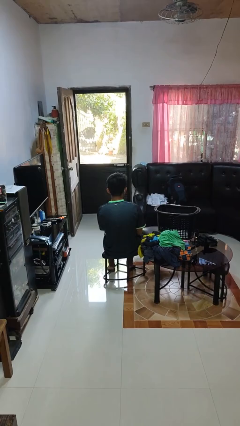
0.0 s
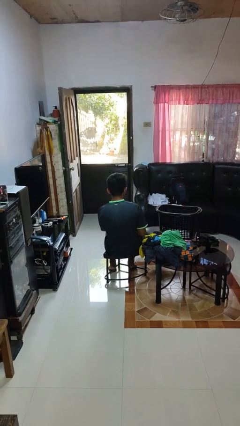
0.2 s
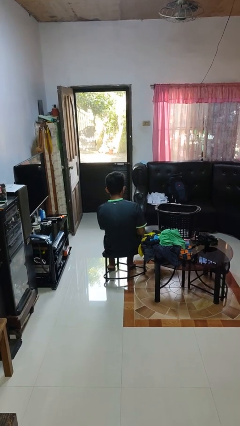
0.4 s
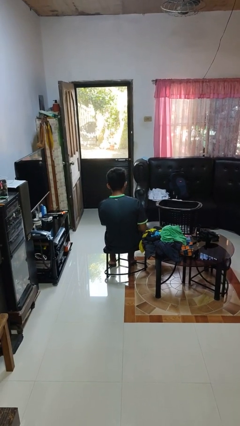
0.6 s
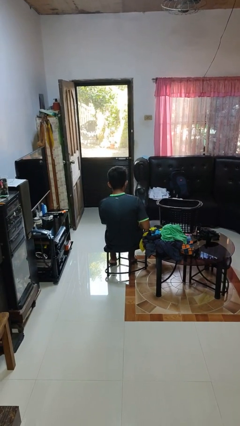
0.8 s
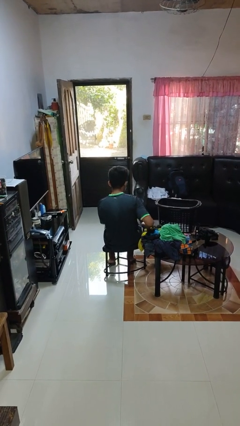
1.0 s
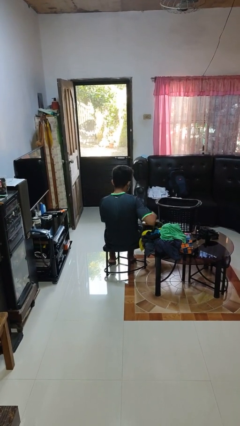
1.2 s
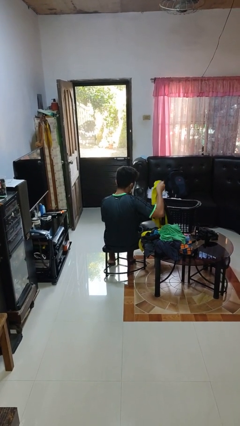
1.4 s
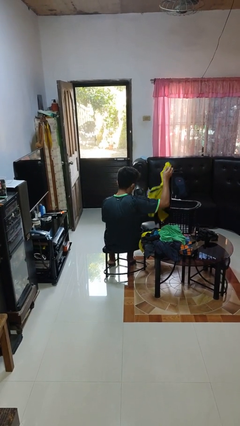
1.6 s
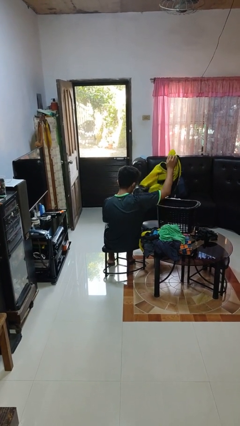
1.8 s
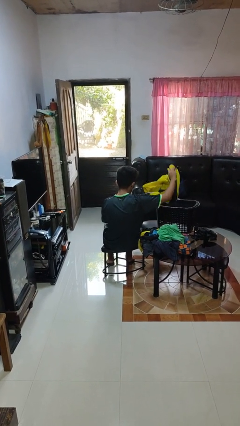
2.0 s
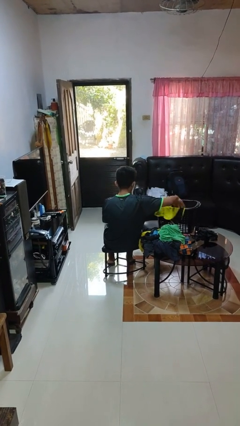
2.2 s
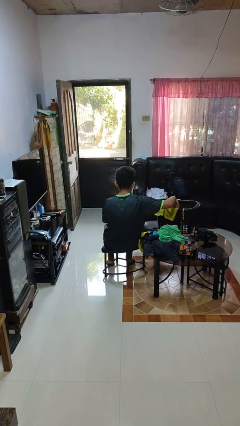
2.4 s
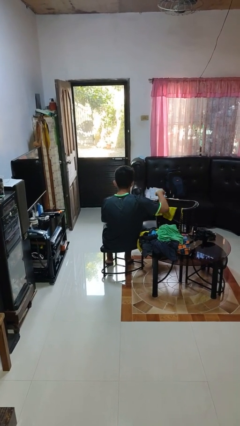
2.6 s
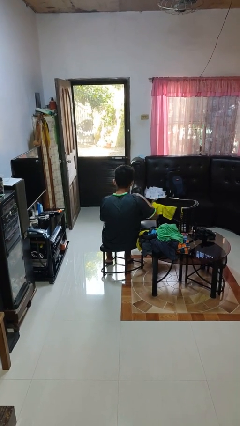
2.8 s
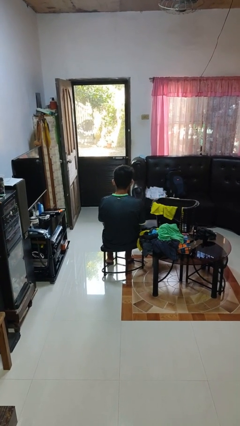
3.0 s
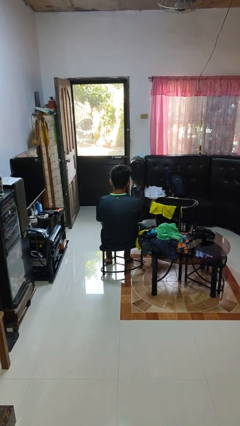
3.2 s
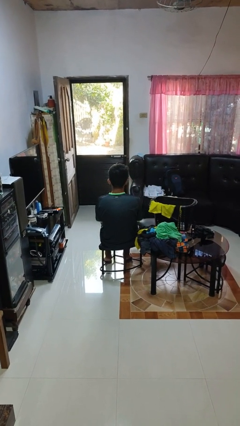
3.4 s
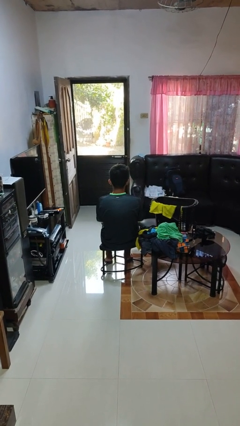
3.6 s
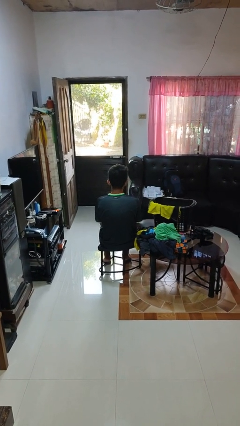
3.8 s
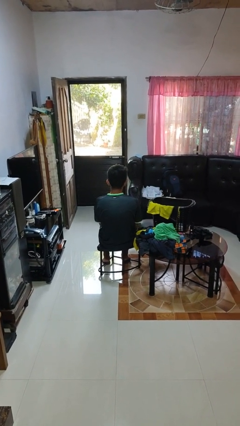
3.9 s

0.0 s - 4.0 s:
person puts object into basket

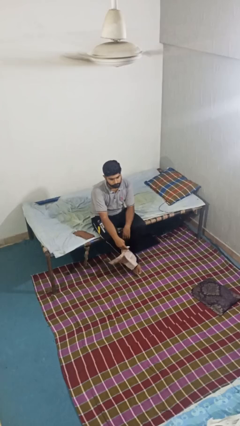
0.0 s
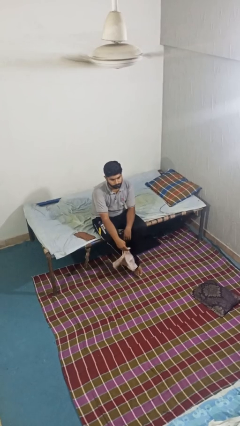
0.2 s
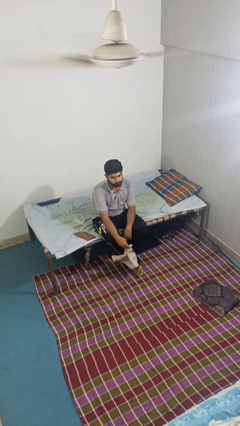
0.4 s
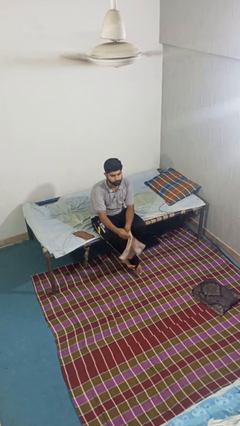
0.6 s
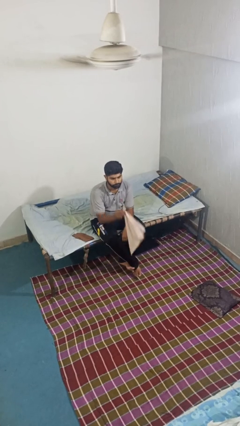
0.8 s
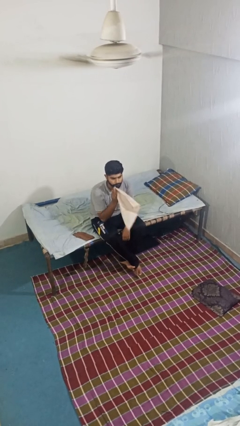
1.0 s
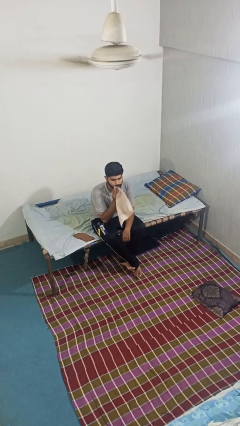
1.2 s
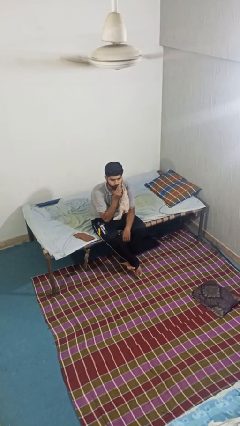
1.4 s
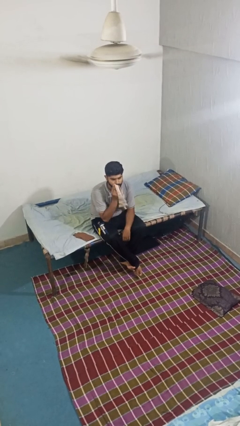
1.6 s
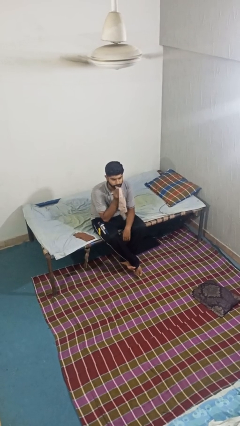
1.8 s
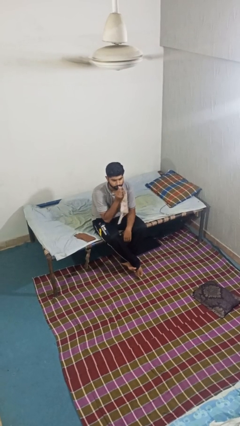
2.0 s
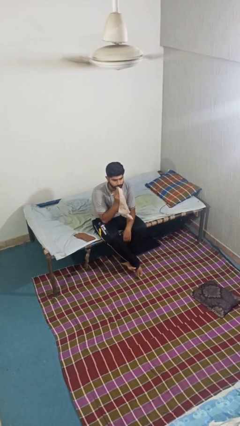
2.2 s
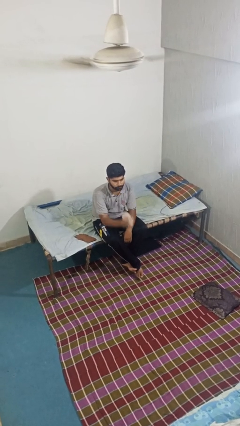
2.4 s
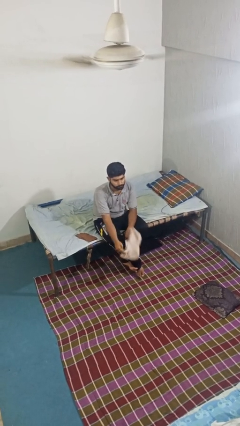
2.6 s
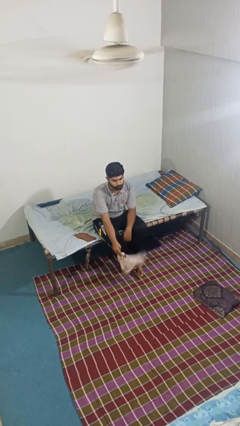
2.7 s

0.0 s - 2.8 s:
person wipes mouth with napkin

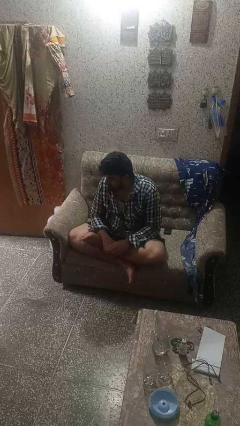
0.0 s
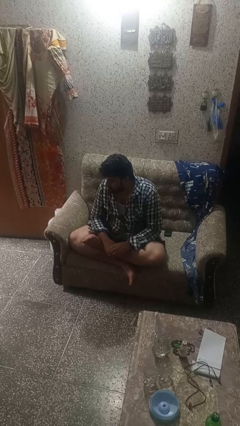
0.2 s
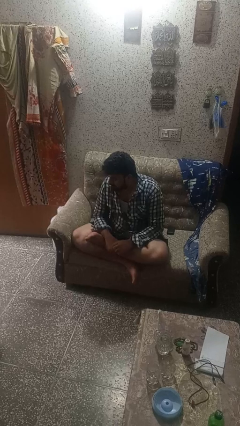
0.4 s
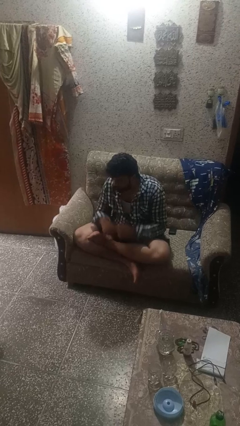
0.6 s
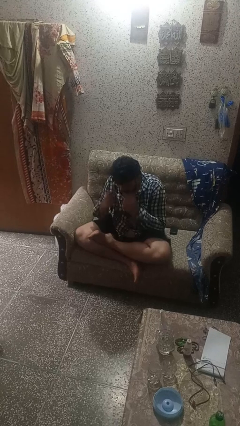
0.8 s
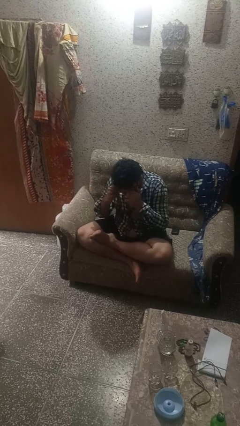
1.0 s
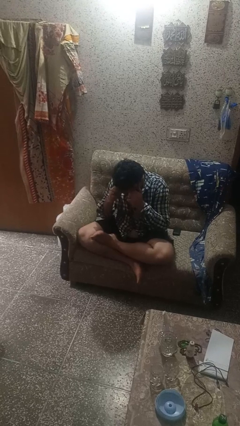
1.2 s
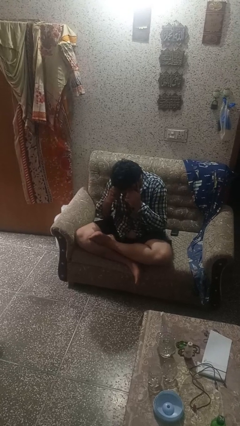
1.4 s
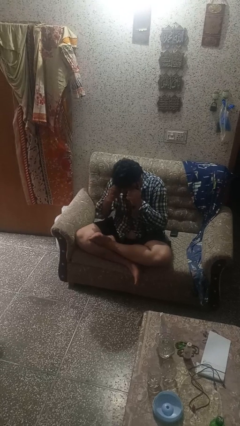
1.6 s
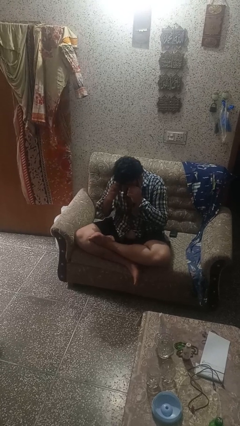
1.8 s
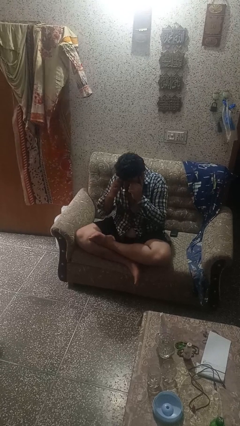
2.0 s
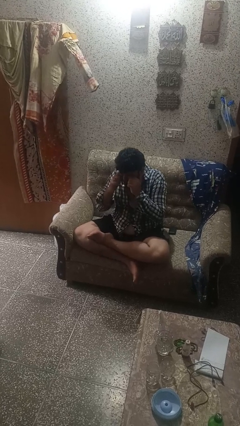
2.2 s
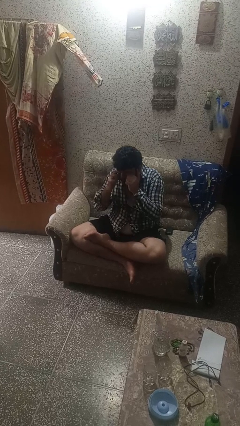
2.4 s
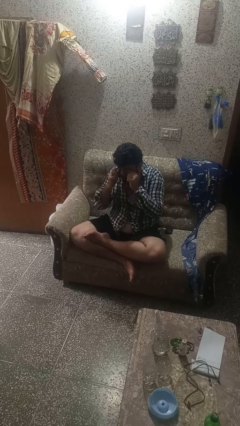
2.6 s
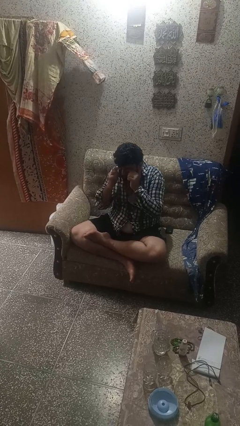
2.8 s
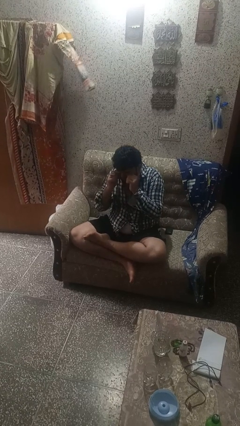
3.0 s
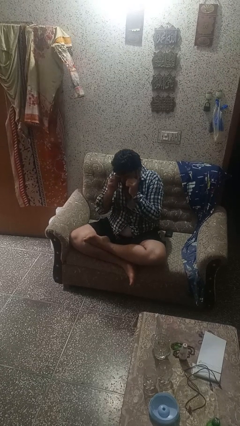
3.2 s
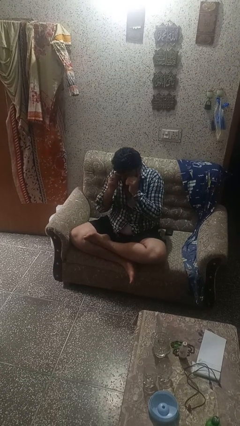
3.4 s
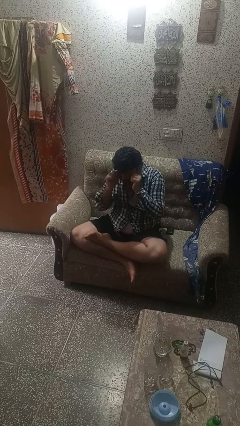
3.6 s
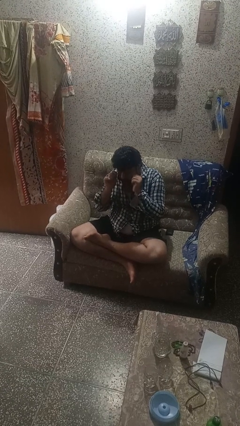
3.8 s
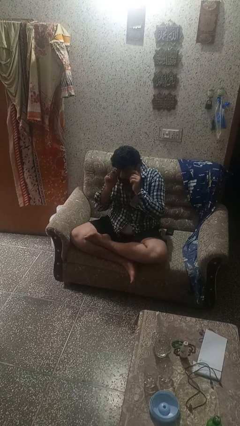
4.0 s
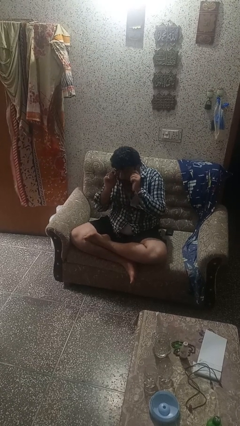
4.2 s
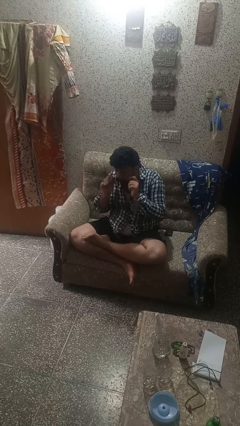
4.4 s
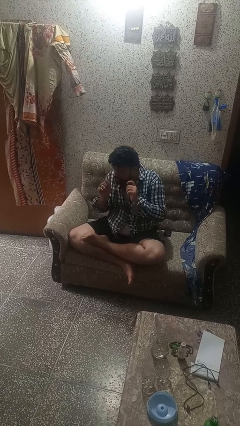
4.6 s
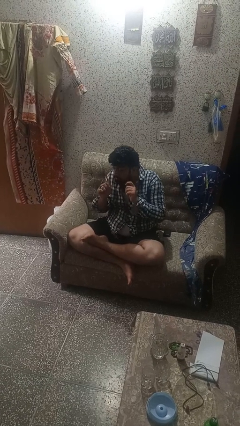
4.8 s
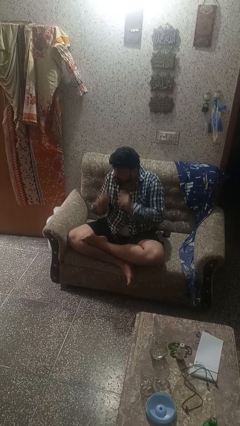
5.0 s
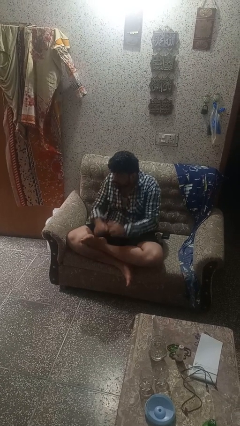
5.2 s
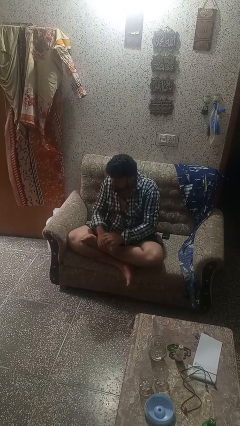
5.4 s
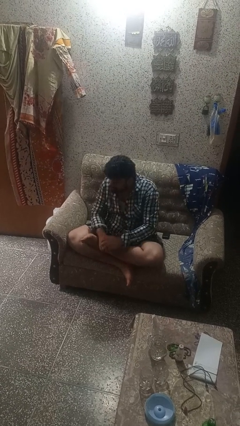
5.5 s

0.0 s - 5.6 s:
person rubs eyes

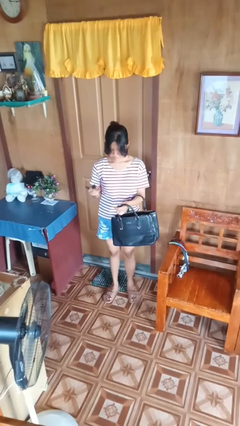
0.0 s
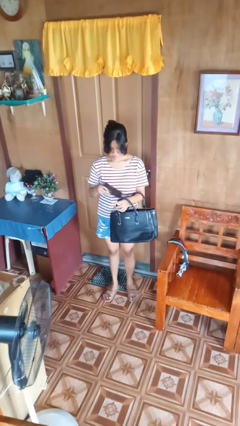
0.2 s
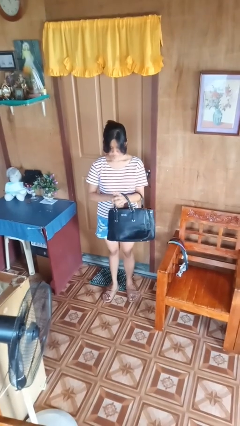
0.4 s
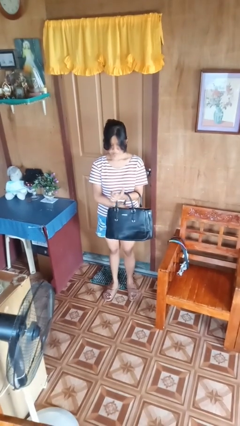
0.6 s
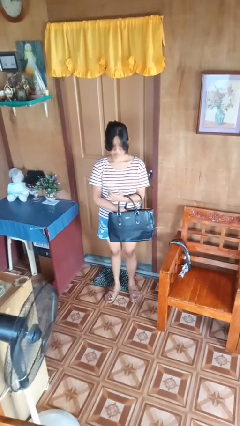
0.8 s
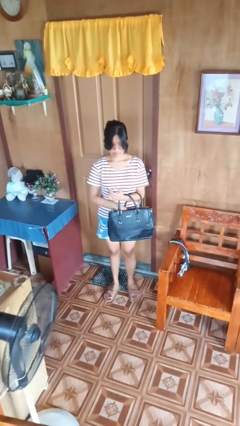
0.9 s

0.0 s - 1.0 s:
person puts object into purse

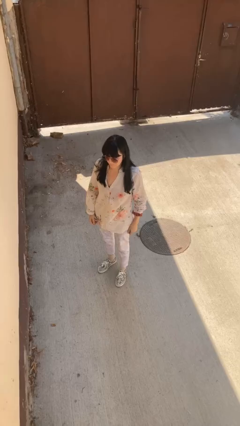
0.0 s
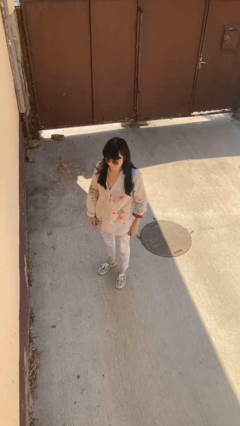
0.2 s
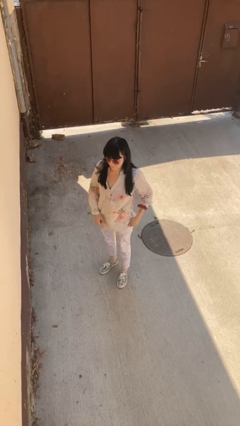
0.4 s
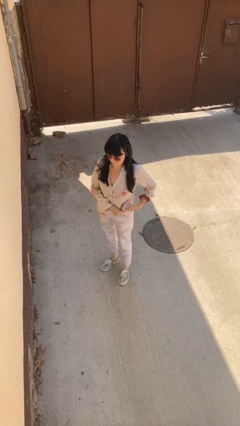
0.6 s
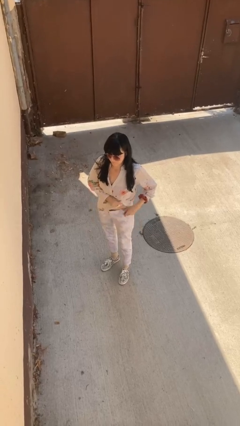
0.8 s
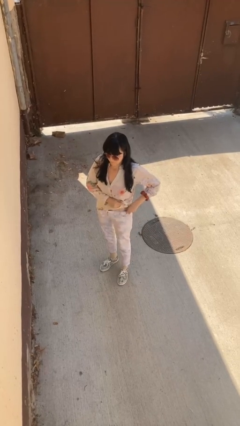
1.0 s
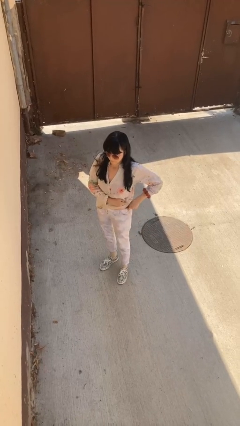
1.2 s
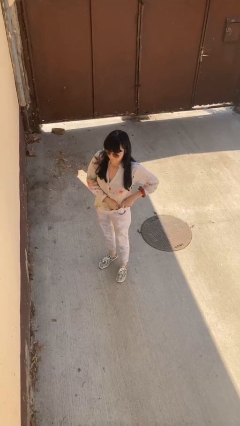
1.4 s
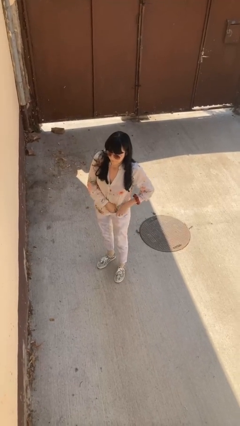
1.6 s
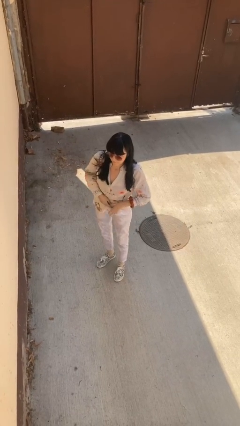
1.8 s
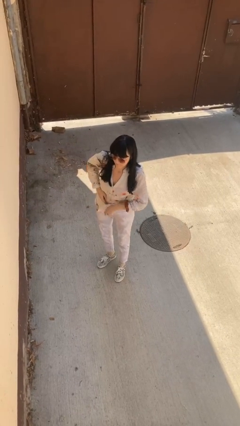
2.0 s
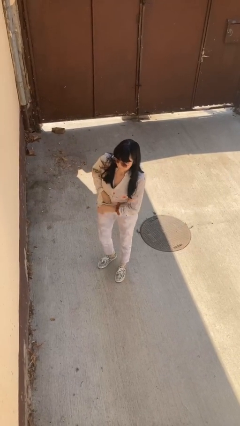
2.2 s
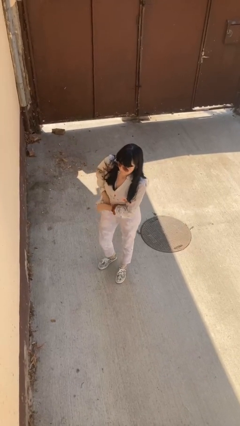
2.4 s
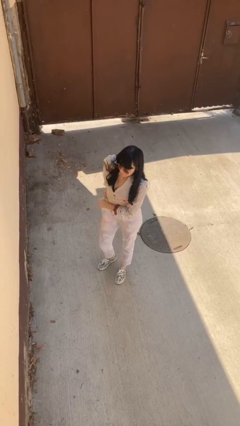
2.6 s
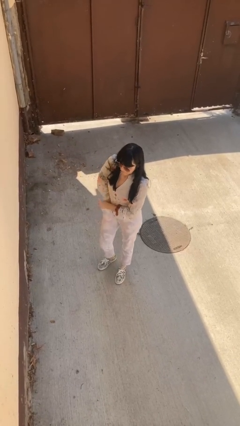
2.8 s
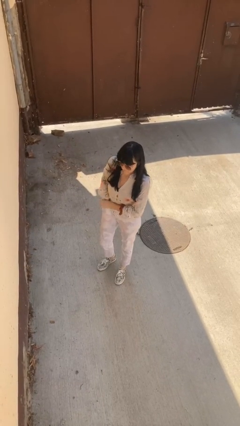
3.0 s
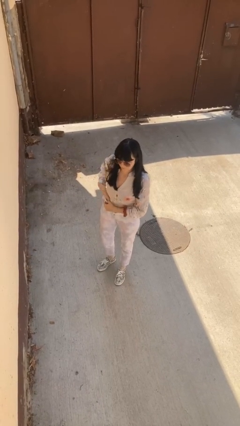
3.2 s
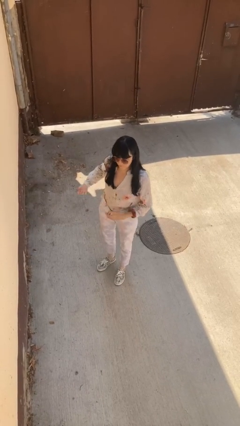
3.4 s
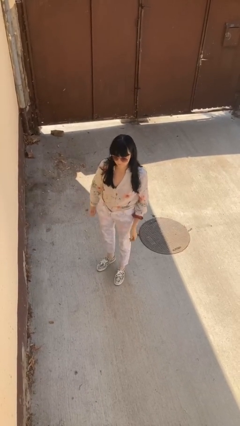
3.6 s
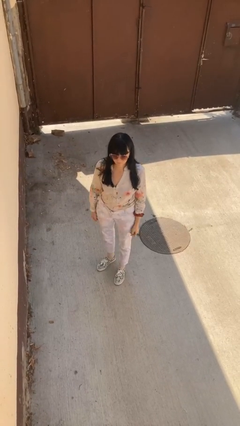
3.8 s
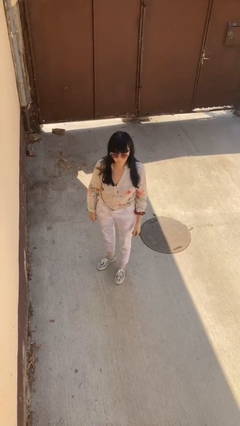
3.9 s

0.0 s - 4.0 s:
person tucks in shirt

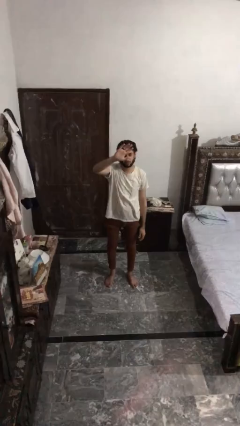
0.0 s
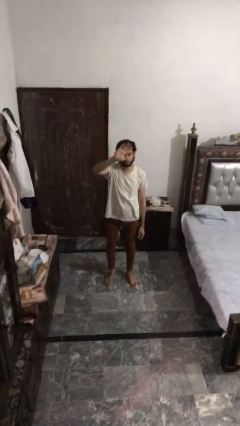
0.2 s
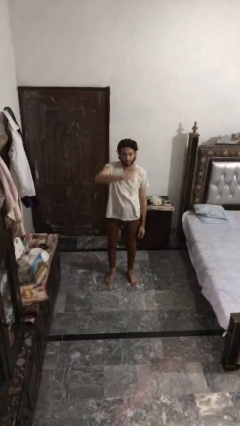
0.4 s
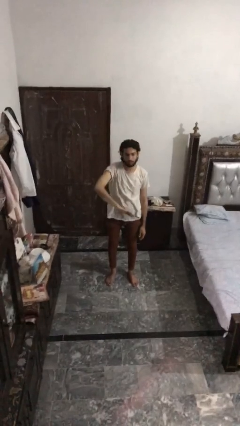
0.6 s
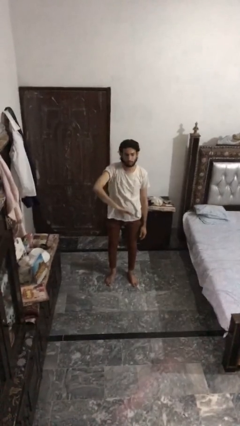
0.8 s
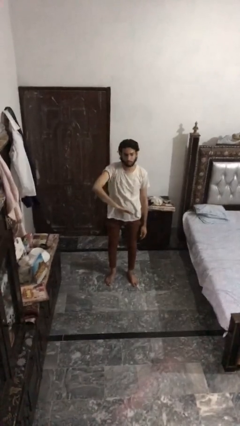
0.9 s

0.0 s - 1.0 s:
person gestures swipe down
